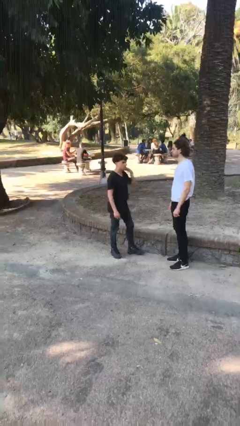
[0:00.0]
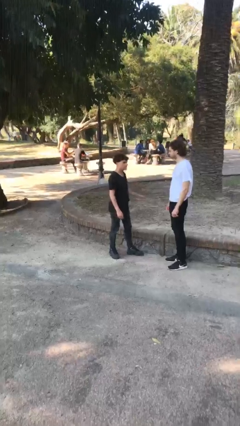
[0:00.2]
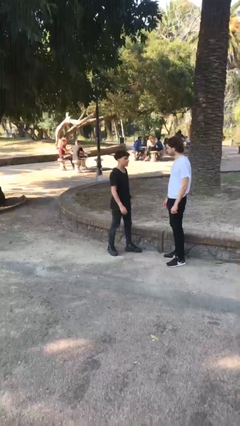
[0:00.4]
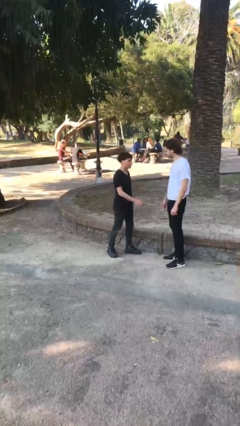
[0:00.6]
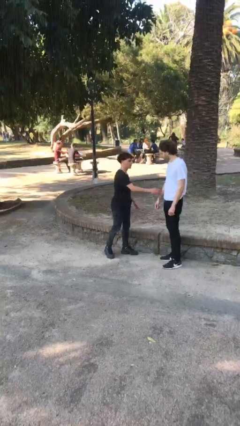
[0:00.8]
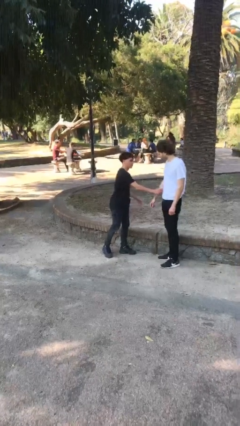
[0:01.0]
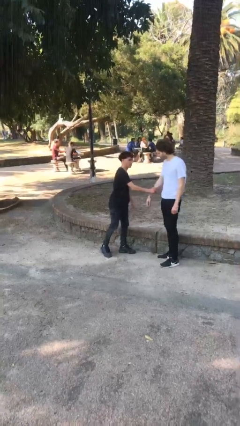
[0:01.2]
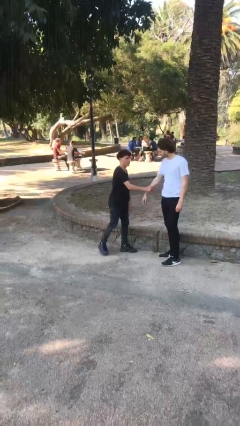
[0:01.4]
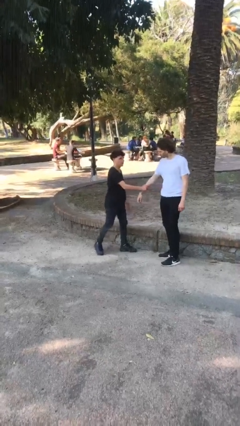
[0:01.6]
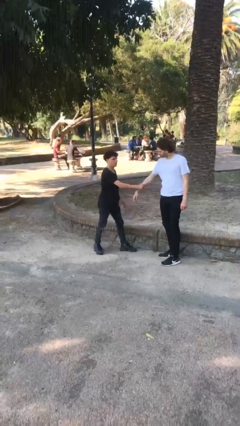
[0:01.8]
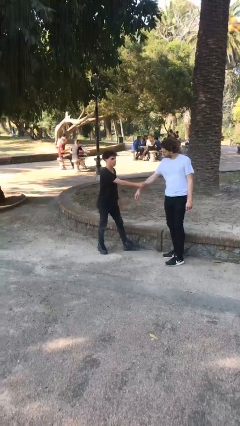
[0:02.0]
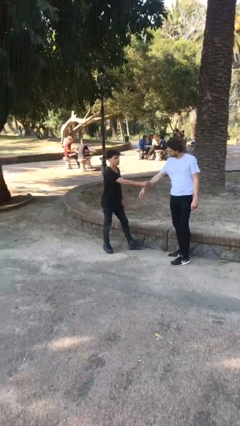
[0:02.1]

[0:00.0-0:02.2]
person grabs person by forearm

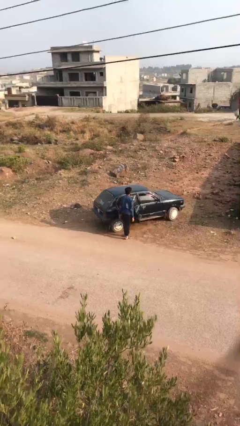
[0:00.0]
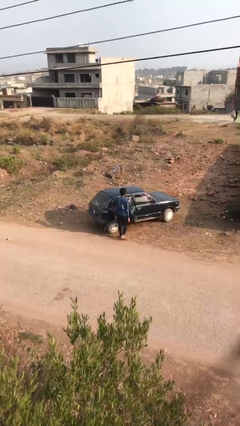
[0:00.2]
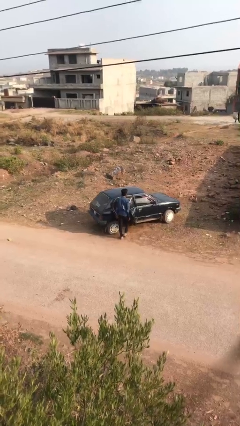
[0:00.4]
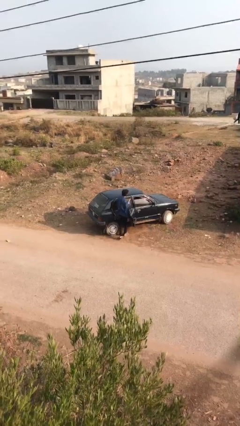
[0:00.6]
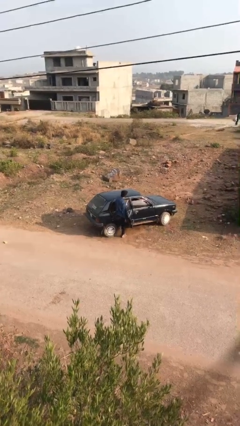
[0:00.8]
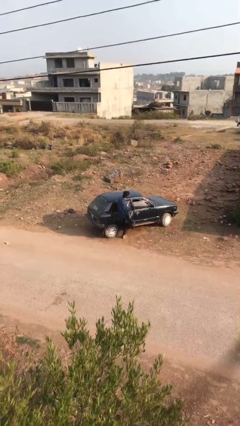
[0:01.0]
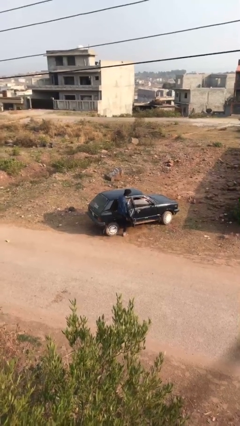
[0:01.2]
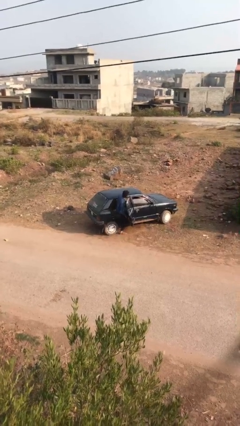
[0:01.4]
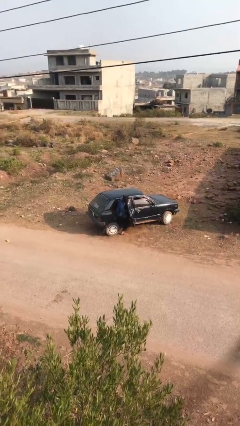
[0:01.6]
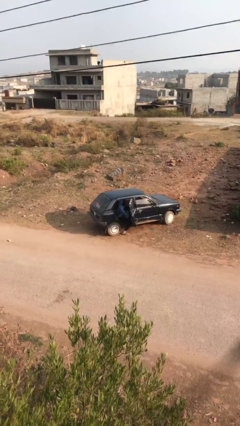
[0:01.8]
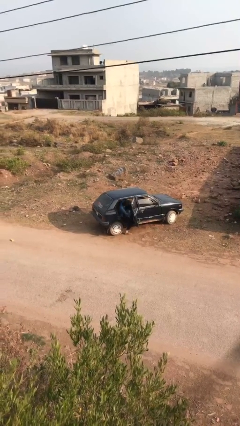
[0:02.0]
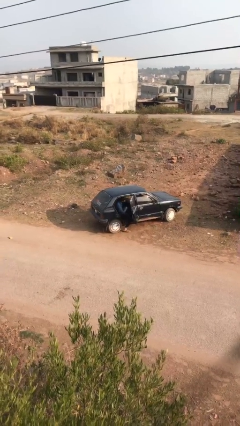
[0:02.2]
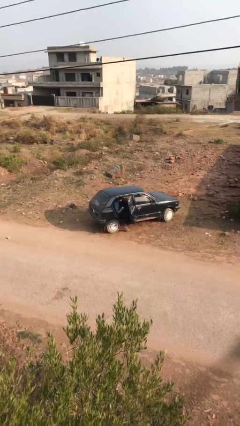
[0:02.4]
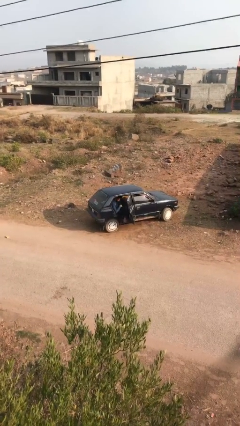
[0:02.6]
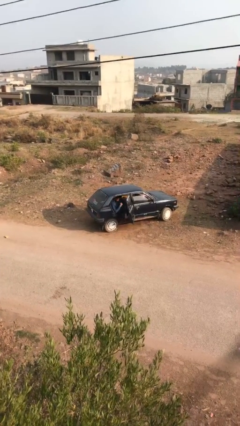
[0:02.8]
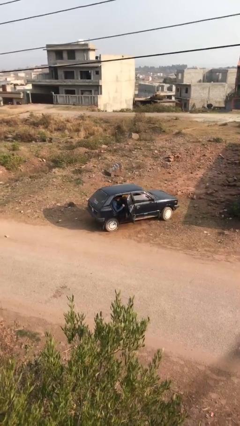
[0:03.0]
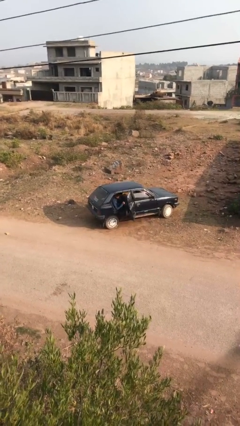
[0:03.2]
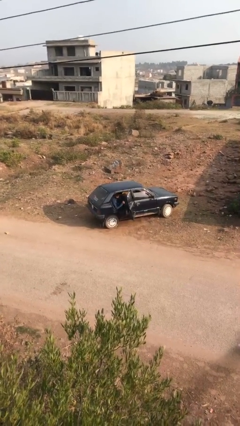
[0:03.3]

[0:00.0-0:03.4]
person enters car

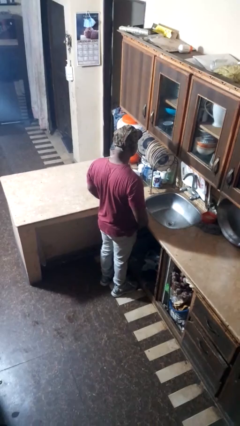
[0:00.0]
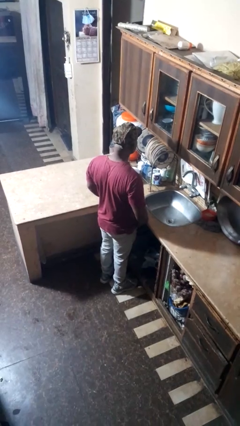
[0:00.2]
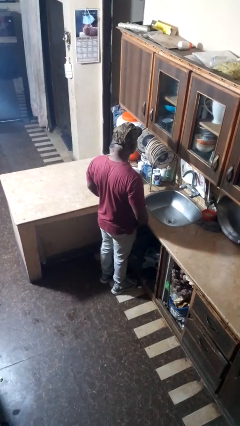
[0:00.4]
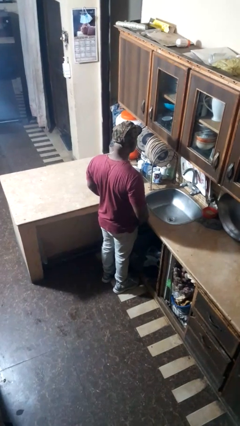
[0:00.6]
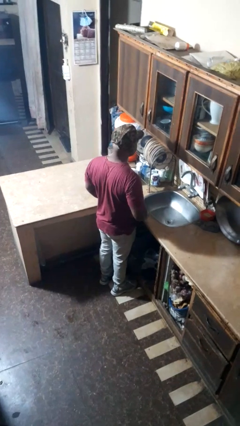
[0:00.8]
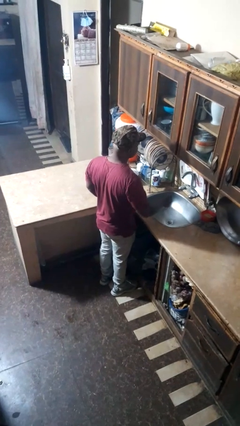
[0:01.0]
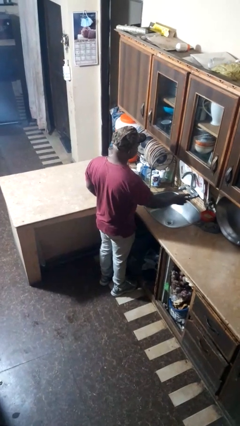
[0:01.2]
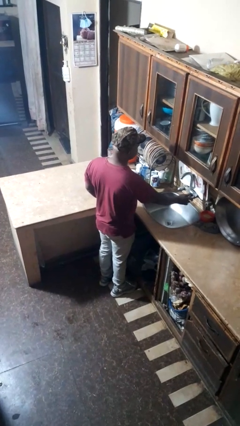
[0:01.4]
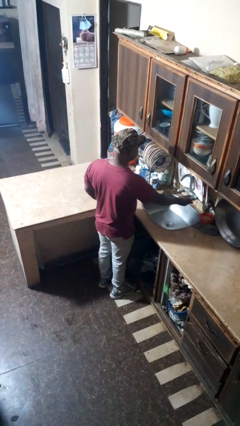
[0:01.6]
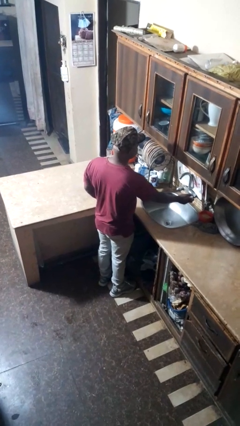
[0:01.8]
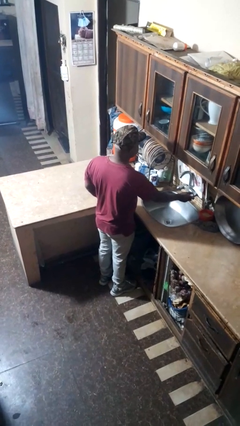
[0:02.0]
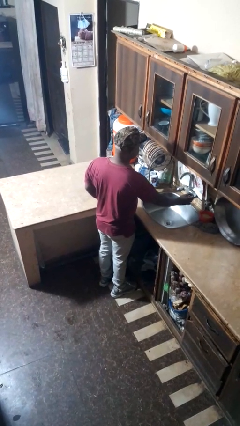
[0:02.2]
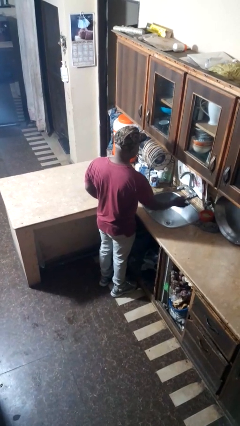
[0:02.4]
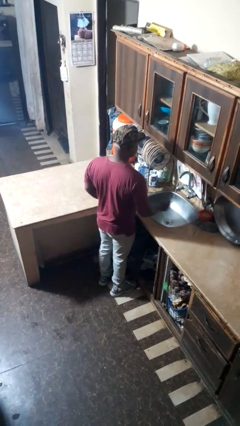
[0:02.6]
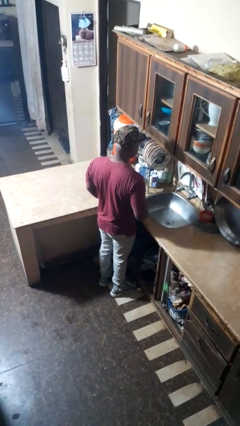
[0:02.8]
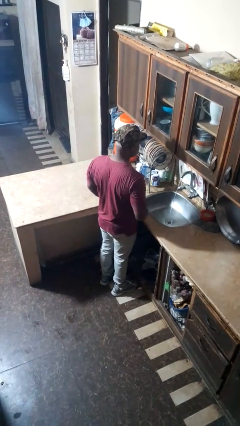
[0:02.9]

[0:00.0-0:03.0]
person turns on faucet

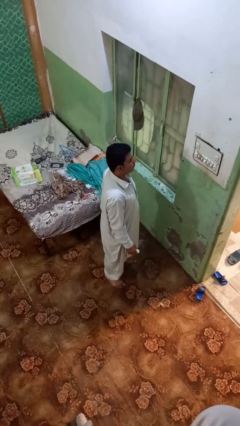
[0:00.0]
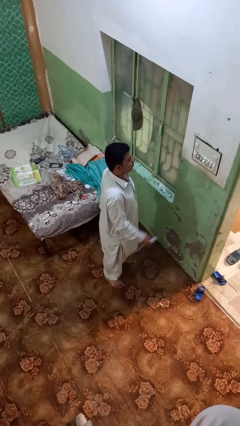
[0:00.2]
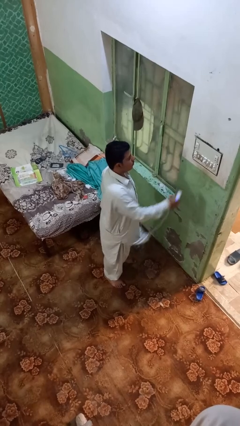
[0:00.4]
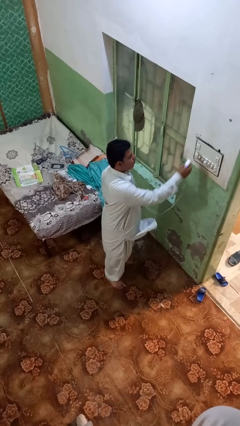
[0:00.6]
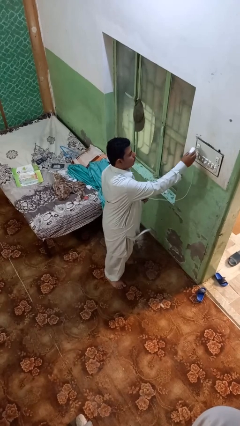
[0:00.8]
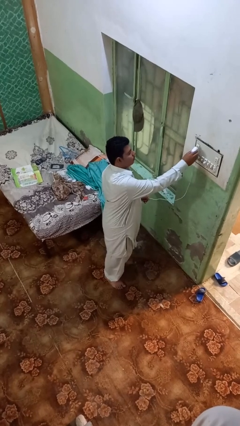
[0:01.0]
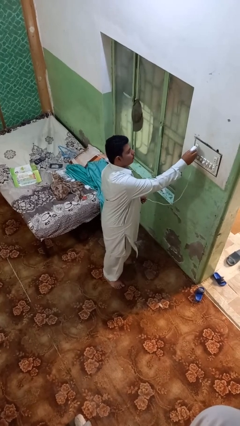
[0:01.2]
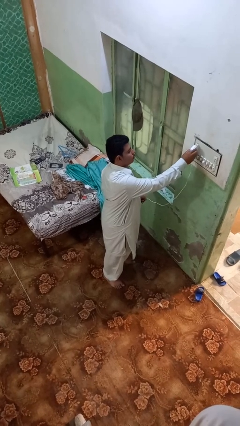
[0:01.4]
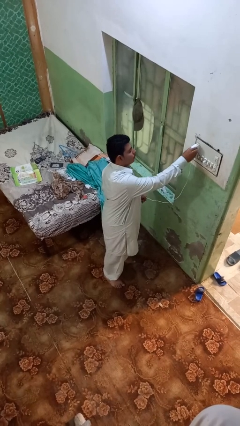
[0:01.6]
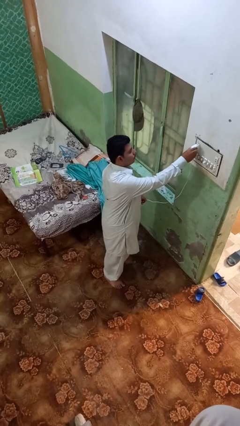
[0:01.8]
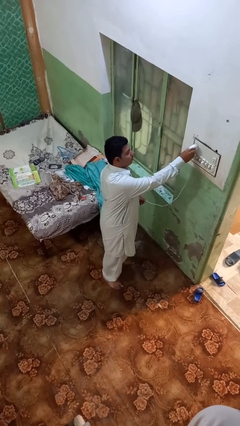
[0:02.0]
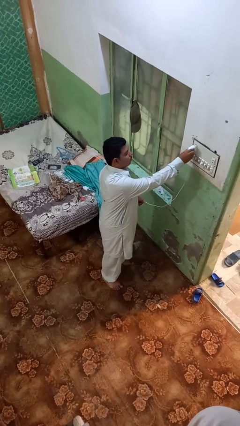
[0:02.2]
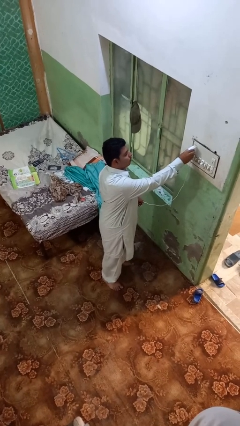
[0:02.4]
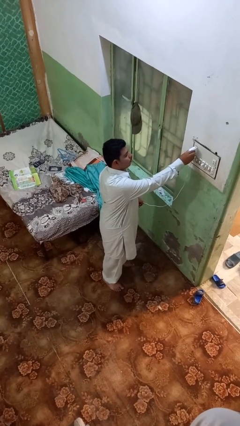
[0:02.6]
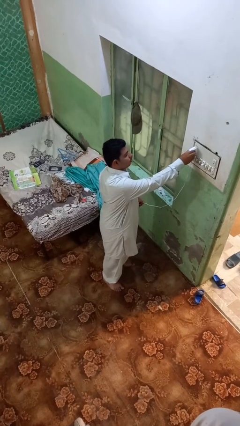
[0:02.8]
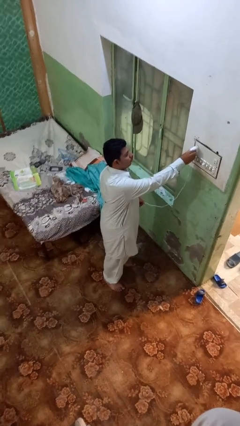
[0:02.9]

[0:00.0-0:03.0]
person plugs into electrical socket

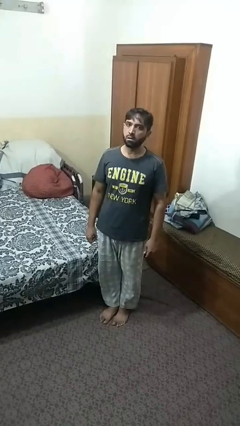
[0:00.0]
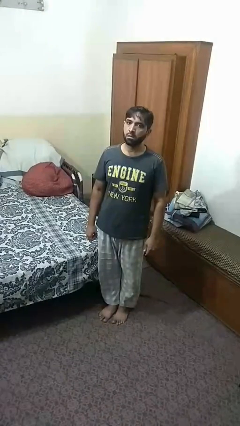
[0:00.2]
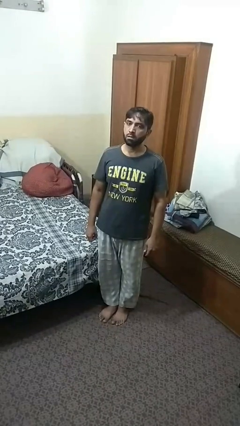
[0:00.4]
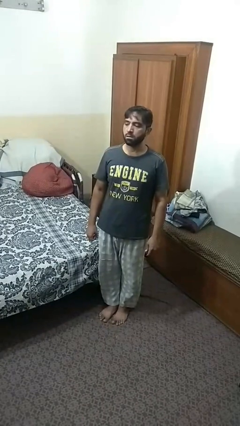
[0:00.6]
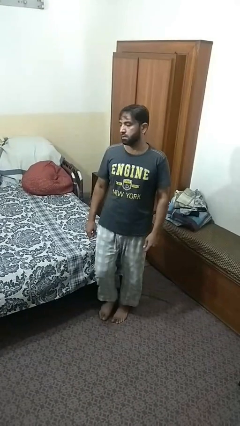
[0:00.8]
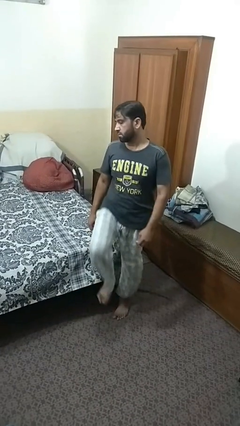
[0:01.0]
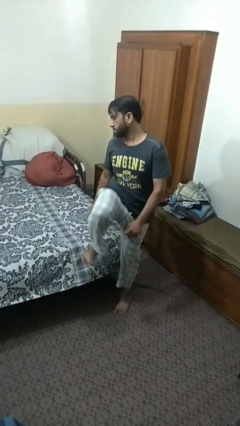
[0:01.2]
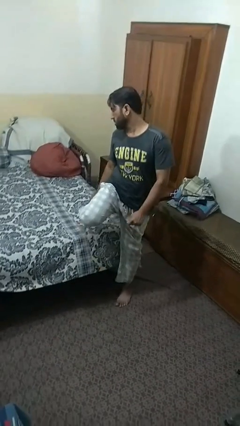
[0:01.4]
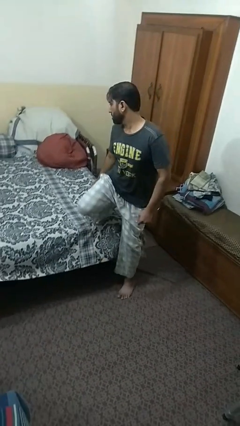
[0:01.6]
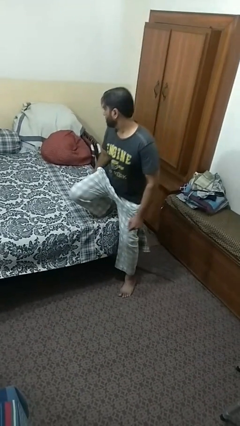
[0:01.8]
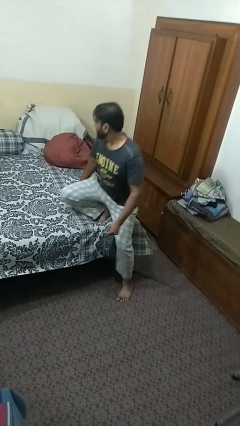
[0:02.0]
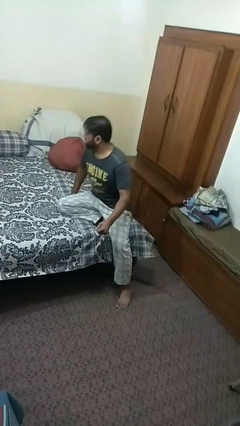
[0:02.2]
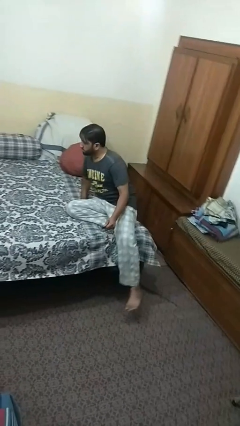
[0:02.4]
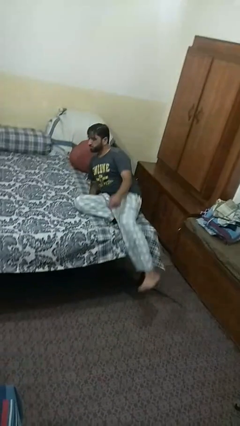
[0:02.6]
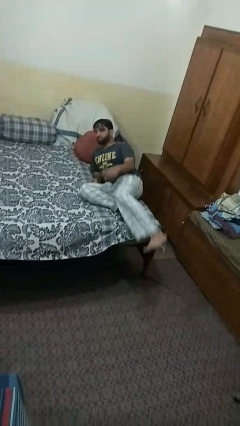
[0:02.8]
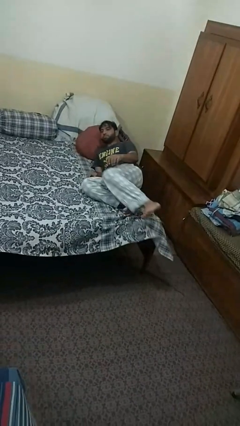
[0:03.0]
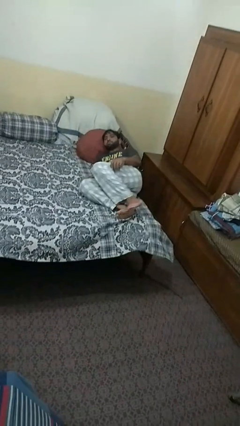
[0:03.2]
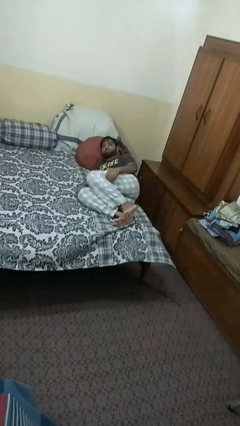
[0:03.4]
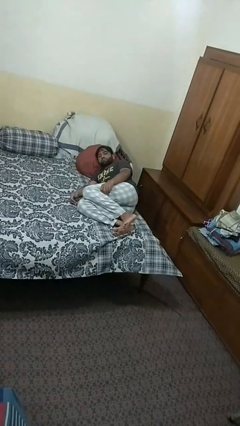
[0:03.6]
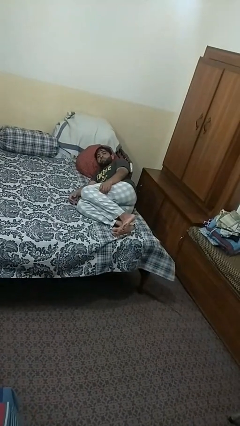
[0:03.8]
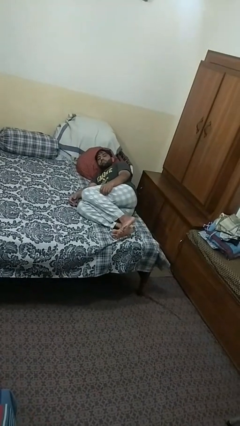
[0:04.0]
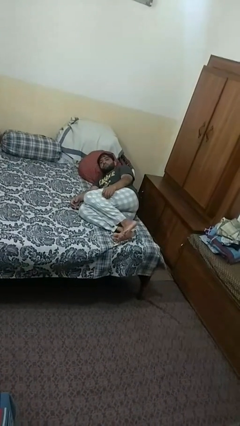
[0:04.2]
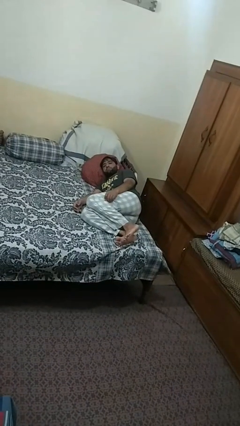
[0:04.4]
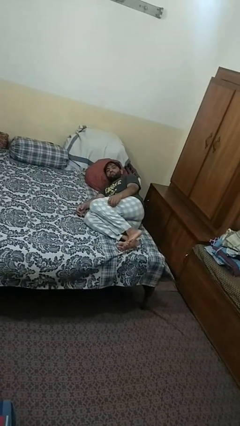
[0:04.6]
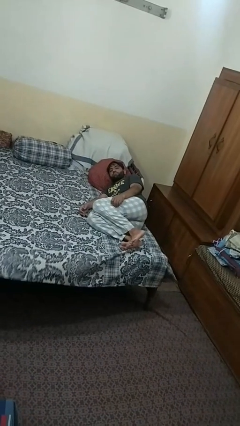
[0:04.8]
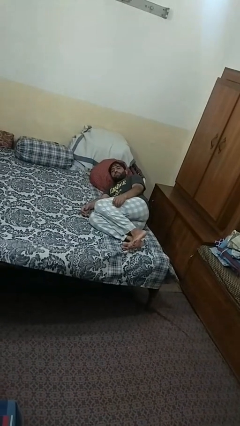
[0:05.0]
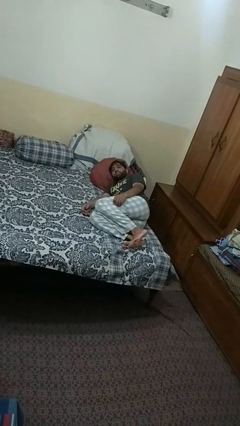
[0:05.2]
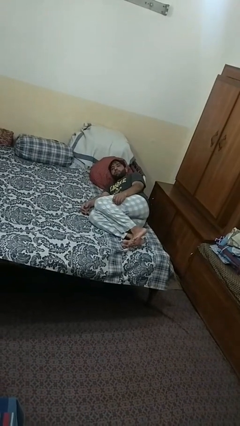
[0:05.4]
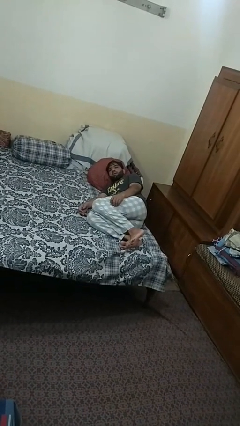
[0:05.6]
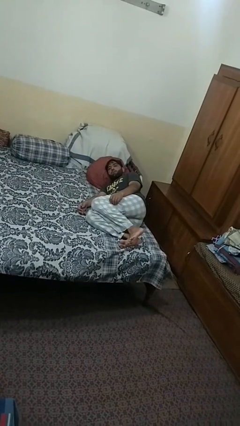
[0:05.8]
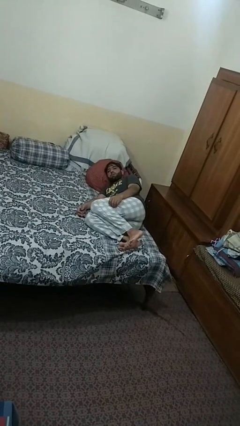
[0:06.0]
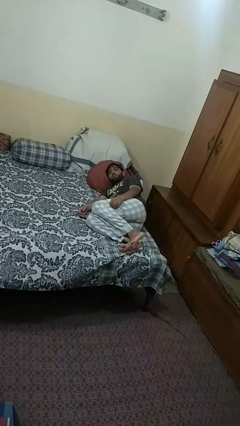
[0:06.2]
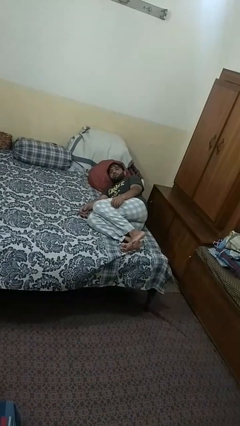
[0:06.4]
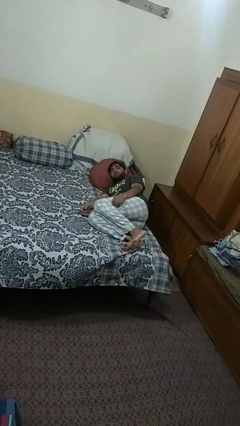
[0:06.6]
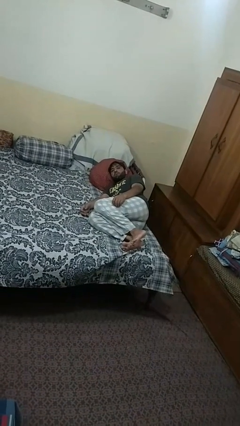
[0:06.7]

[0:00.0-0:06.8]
person lies down on bed
